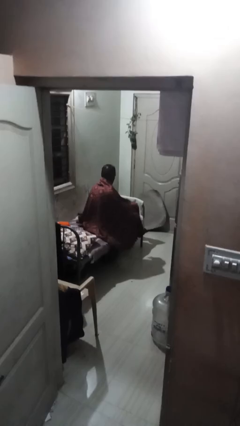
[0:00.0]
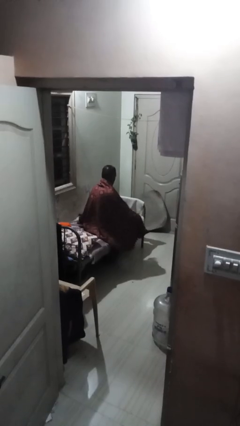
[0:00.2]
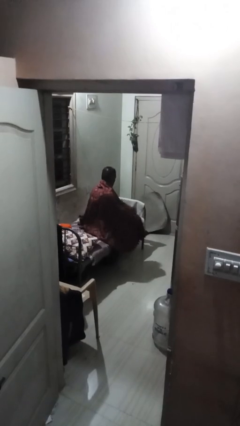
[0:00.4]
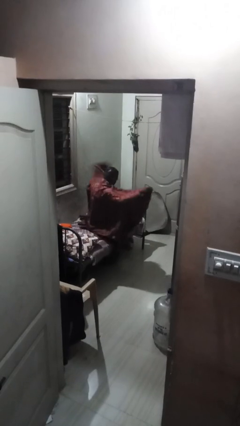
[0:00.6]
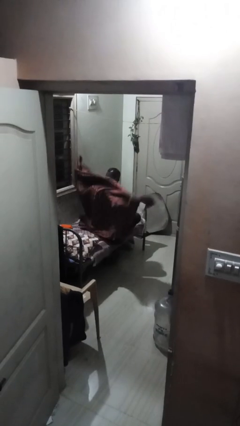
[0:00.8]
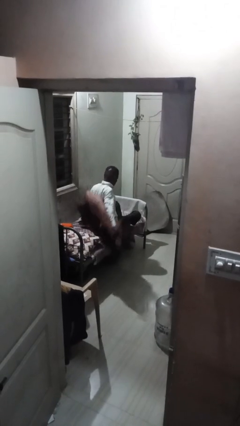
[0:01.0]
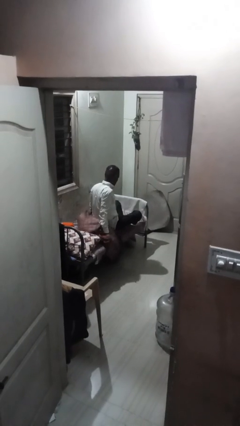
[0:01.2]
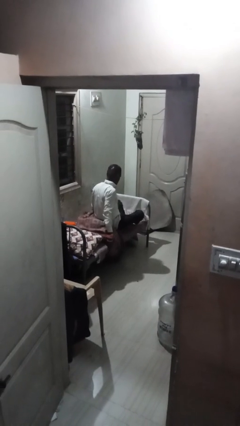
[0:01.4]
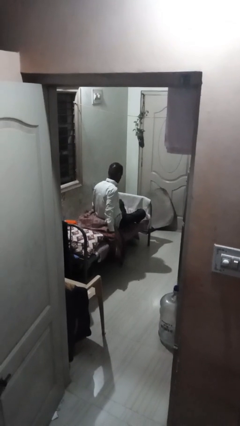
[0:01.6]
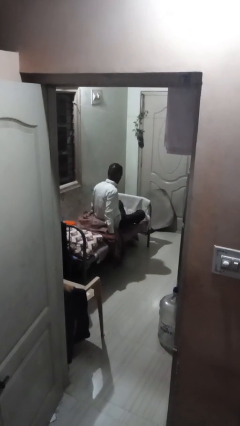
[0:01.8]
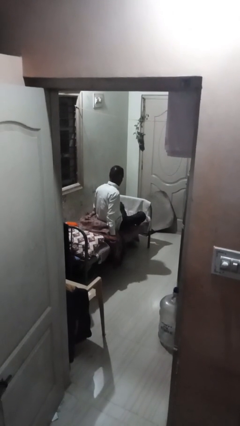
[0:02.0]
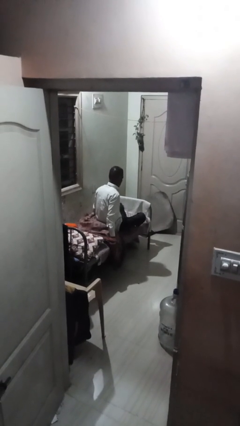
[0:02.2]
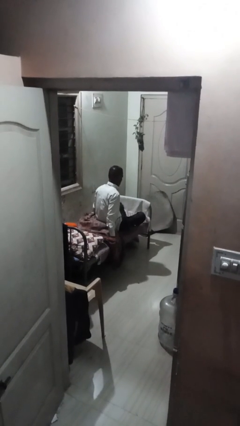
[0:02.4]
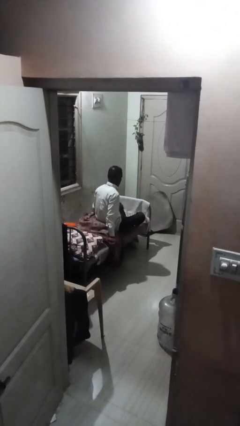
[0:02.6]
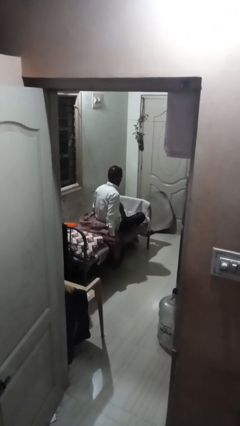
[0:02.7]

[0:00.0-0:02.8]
person uncovers with blanket

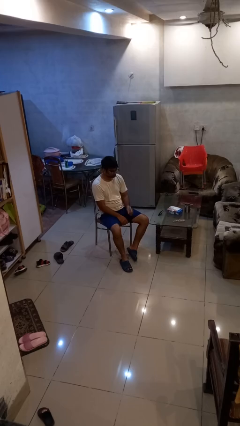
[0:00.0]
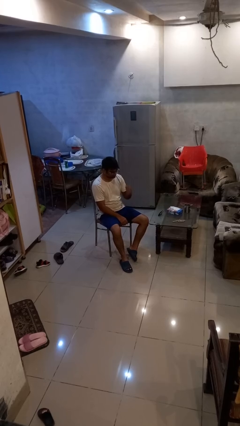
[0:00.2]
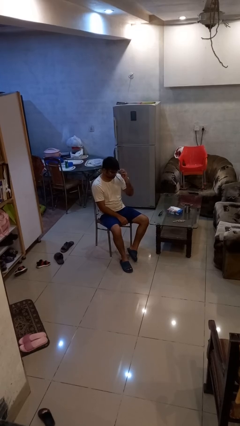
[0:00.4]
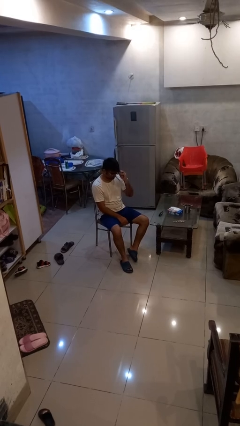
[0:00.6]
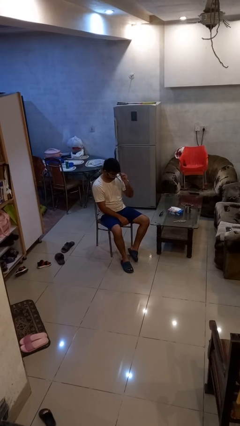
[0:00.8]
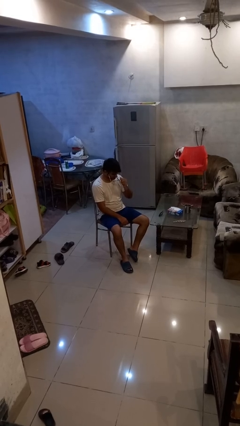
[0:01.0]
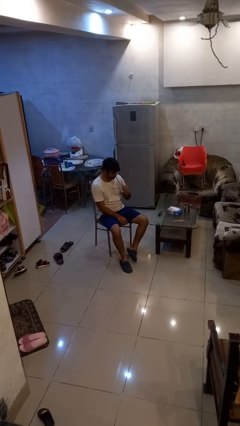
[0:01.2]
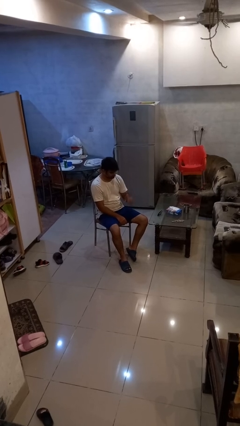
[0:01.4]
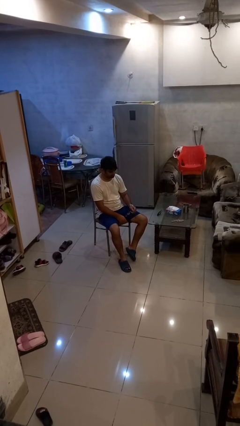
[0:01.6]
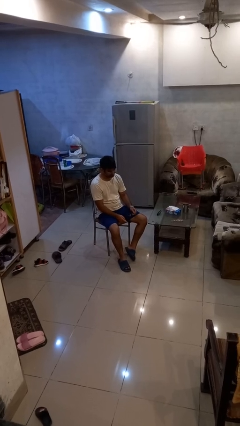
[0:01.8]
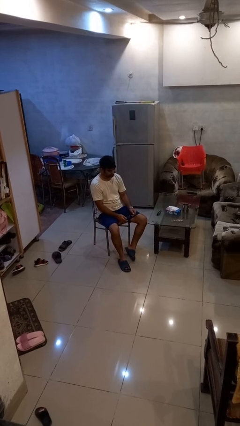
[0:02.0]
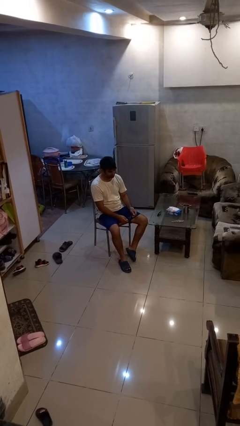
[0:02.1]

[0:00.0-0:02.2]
person takes off glasses

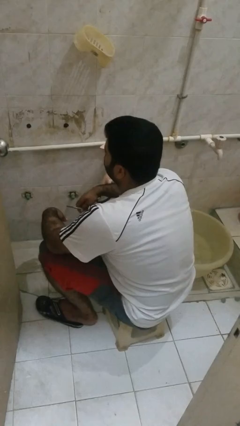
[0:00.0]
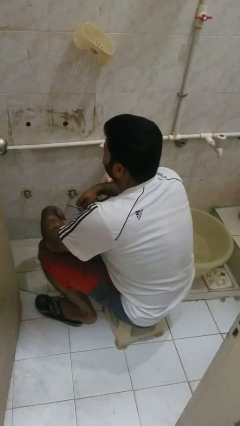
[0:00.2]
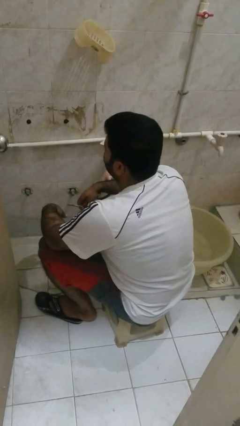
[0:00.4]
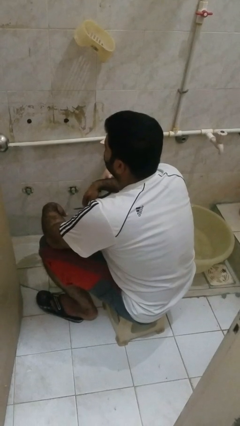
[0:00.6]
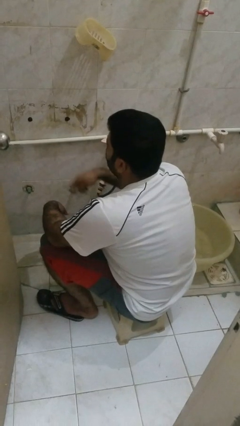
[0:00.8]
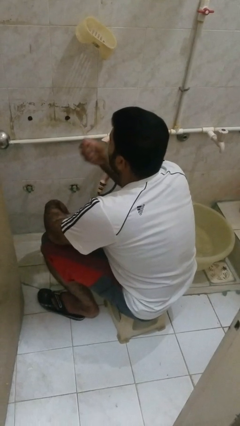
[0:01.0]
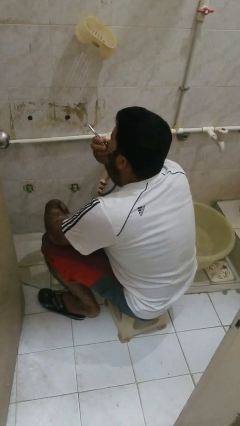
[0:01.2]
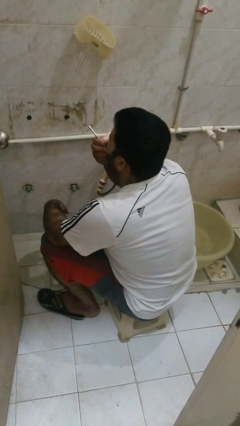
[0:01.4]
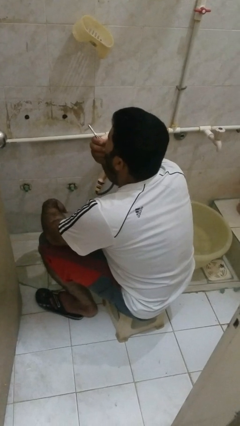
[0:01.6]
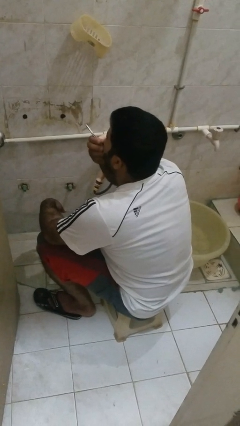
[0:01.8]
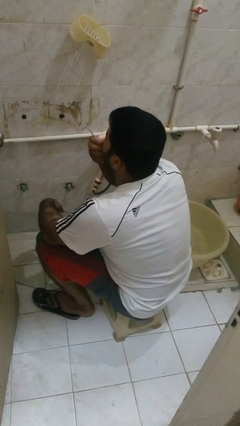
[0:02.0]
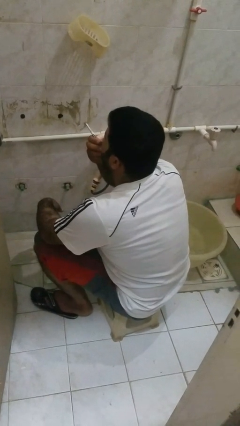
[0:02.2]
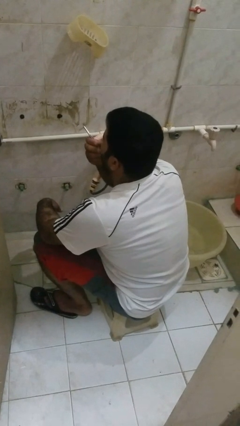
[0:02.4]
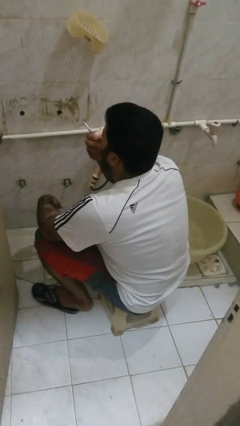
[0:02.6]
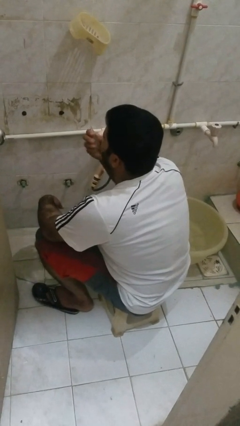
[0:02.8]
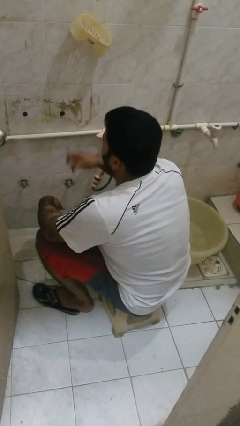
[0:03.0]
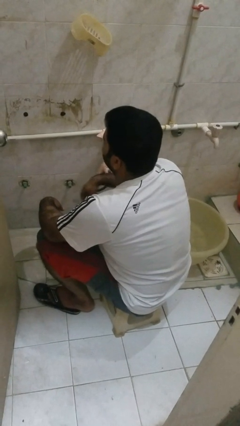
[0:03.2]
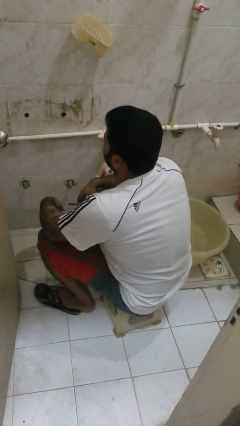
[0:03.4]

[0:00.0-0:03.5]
person flosses

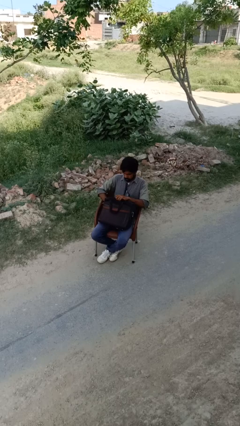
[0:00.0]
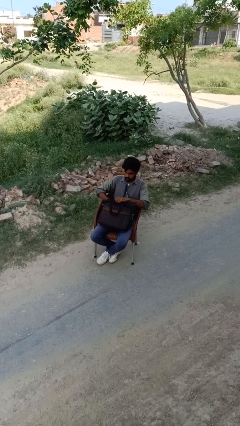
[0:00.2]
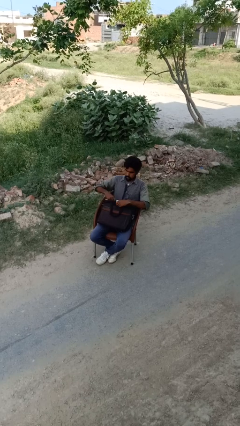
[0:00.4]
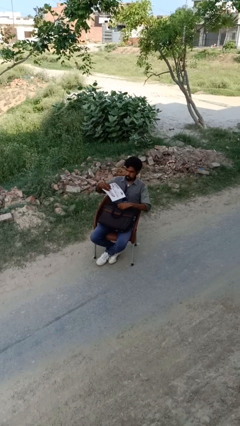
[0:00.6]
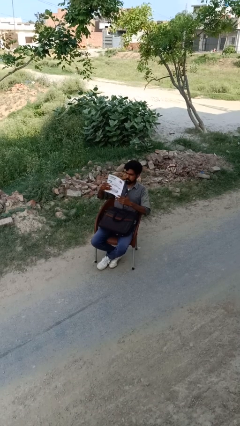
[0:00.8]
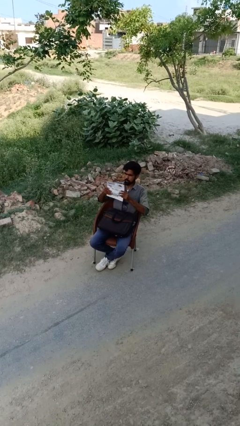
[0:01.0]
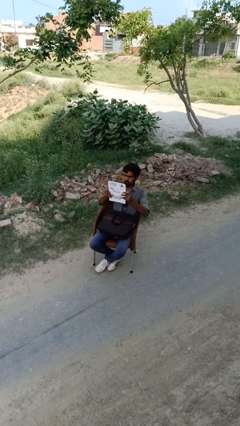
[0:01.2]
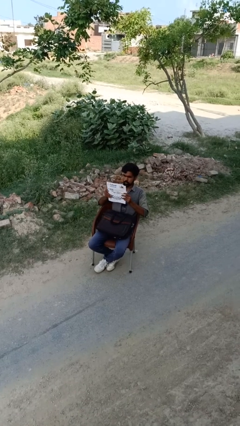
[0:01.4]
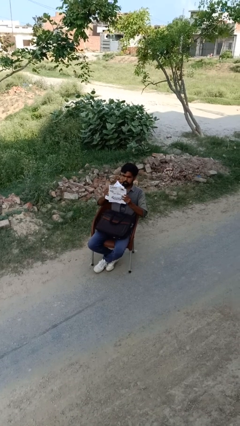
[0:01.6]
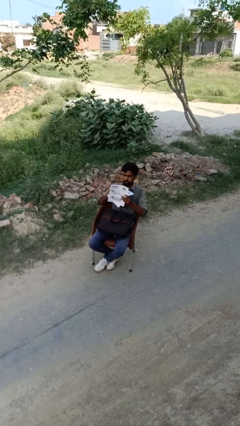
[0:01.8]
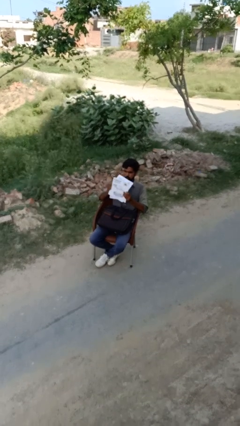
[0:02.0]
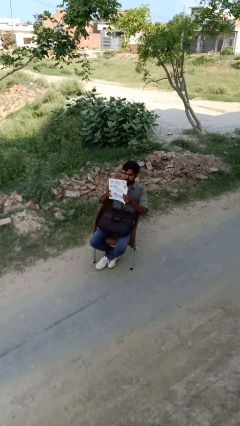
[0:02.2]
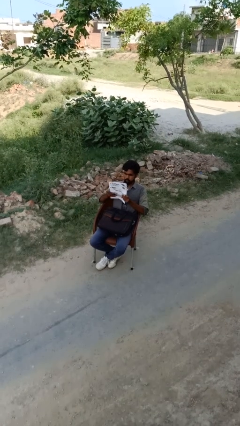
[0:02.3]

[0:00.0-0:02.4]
person takes object from backpack

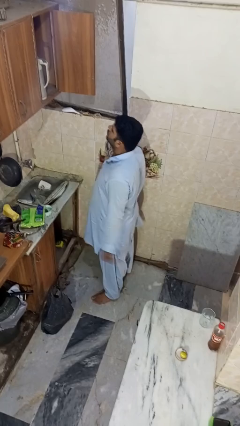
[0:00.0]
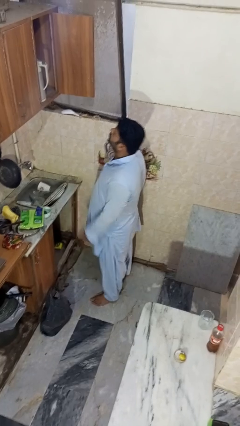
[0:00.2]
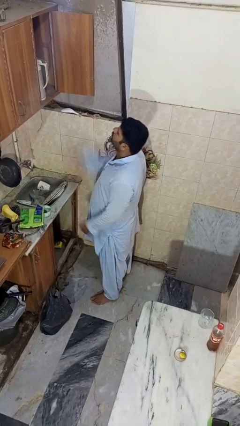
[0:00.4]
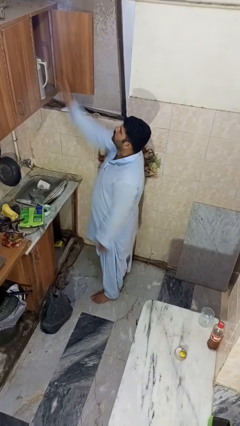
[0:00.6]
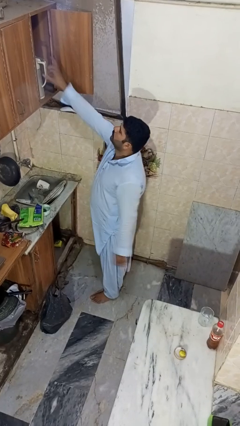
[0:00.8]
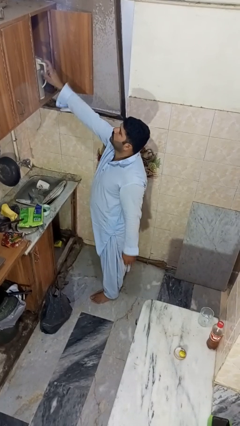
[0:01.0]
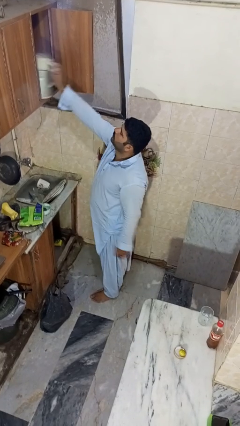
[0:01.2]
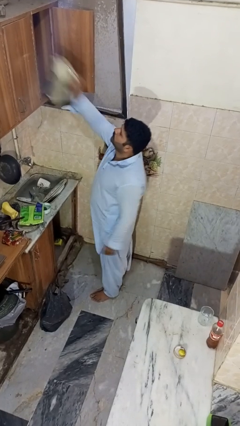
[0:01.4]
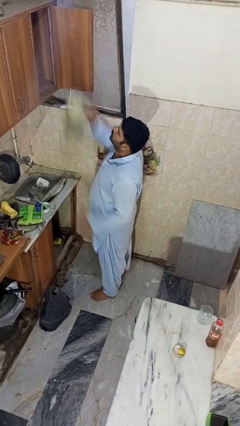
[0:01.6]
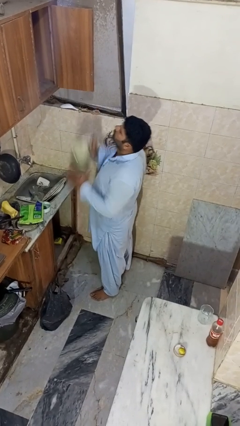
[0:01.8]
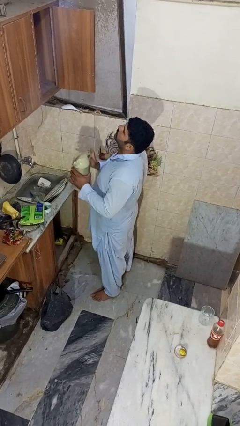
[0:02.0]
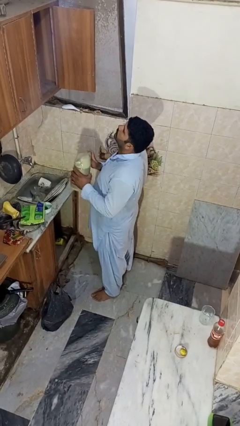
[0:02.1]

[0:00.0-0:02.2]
person takes object from cabinet

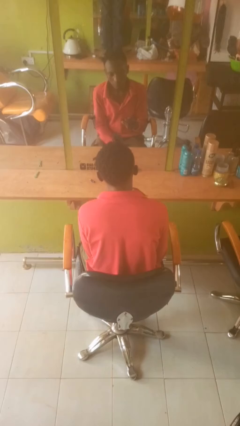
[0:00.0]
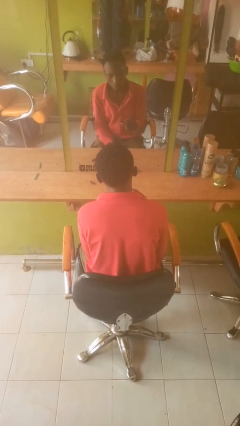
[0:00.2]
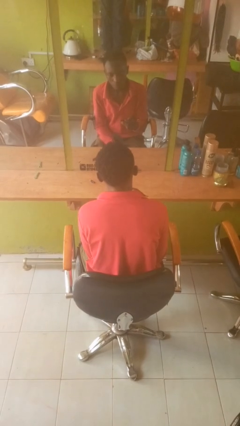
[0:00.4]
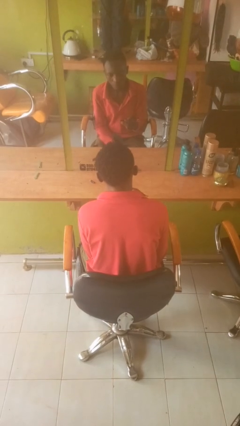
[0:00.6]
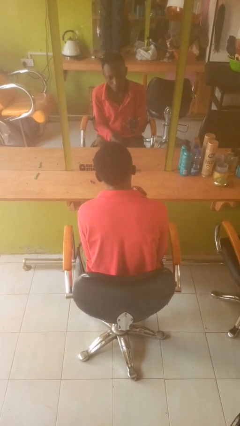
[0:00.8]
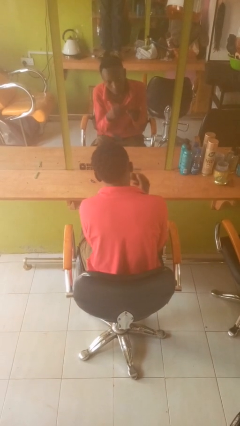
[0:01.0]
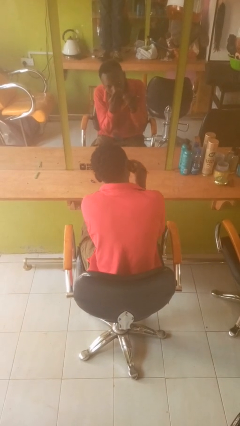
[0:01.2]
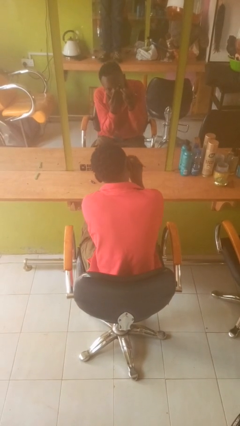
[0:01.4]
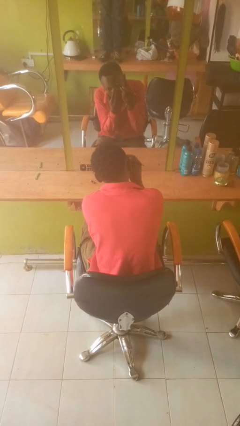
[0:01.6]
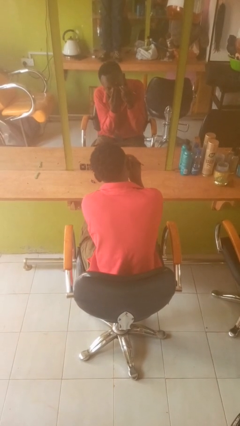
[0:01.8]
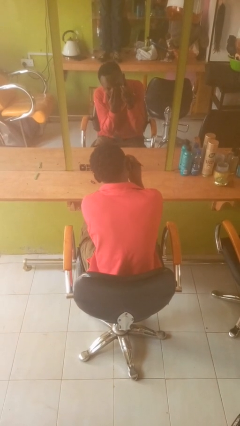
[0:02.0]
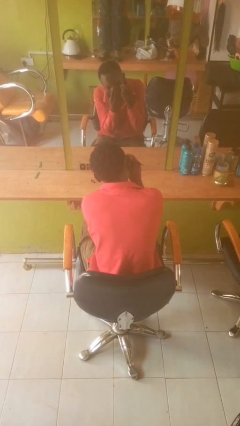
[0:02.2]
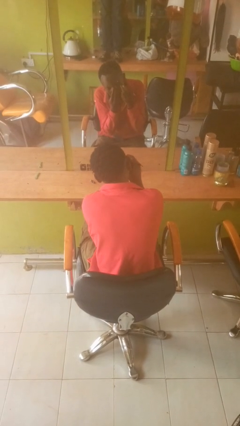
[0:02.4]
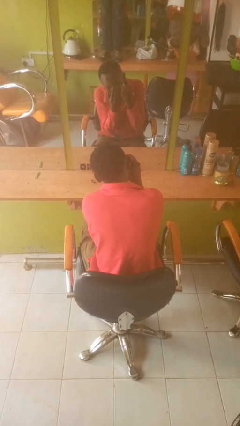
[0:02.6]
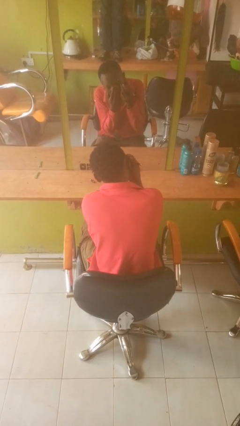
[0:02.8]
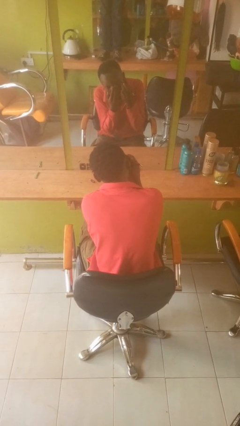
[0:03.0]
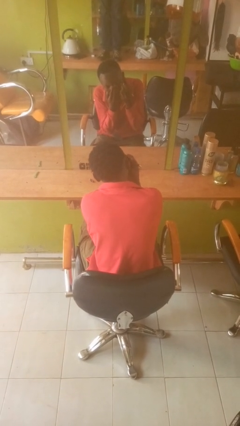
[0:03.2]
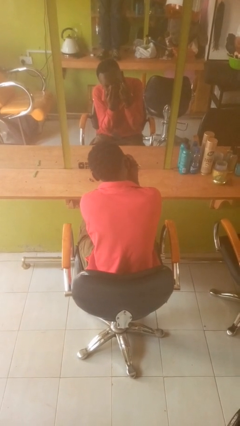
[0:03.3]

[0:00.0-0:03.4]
person applies eye makeup

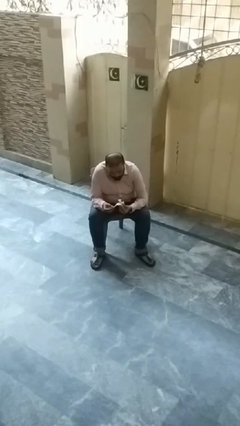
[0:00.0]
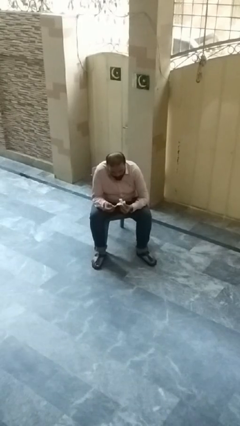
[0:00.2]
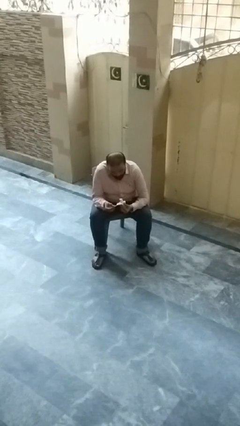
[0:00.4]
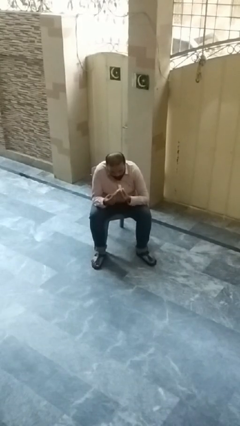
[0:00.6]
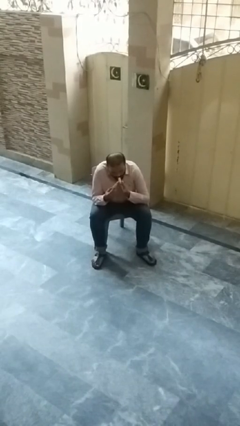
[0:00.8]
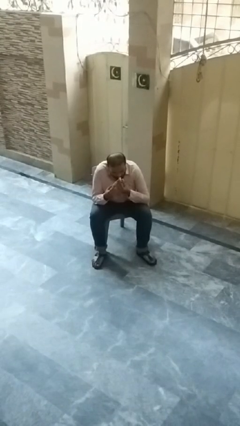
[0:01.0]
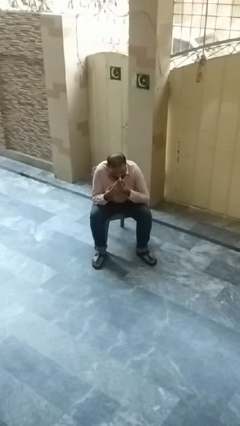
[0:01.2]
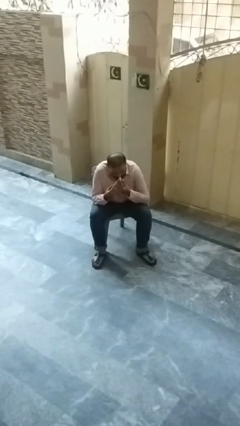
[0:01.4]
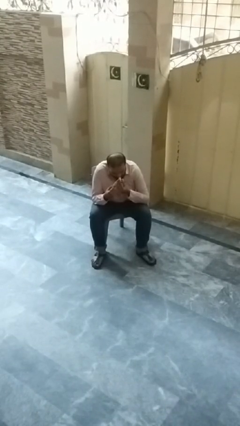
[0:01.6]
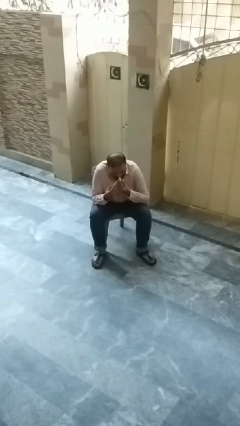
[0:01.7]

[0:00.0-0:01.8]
person eats banana
